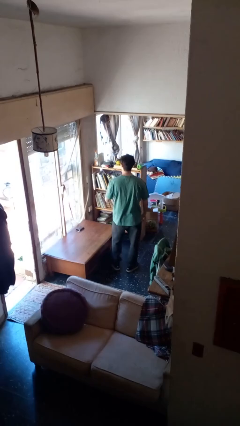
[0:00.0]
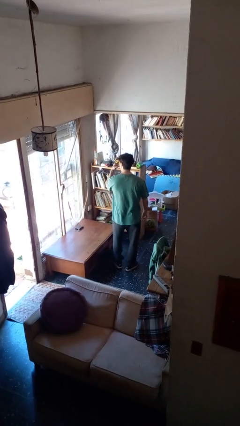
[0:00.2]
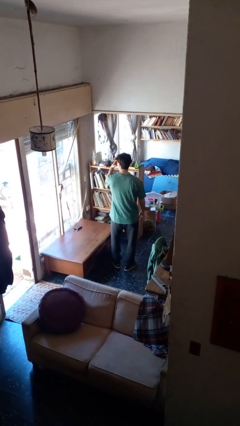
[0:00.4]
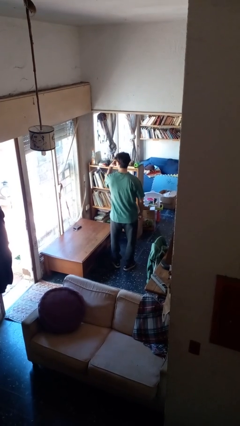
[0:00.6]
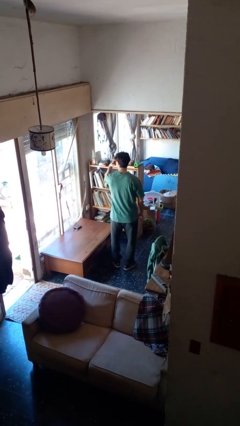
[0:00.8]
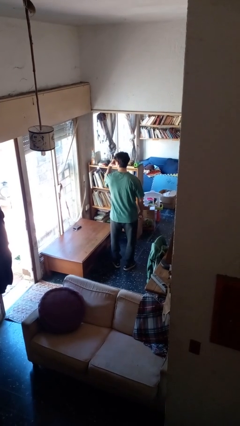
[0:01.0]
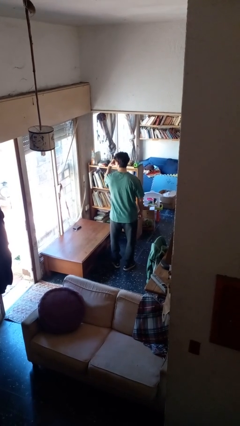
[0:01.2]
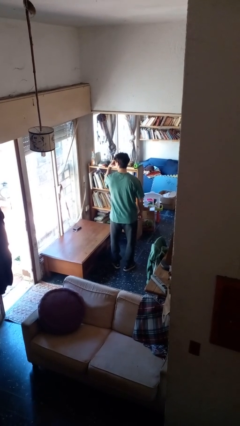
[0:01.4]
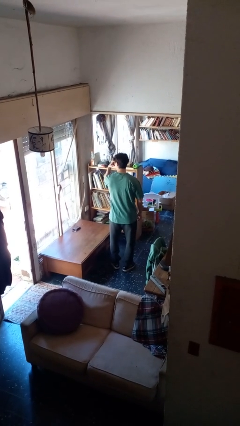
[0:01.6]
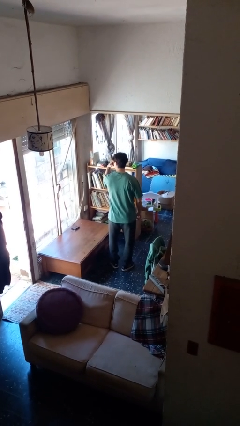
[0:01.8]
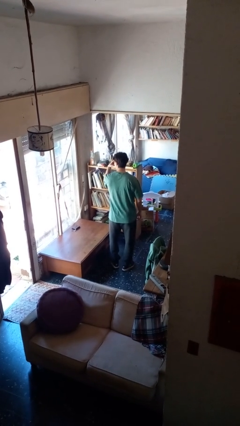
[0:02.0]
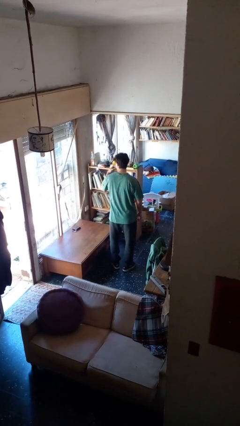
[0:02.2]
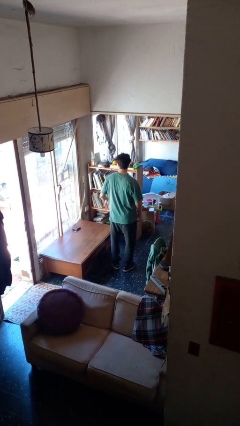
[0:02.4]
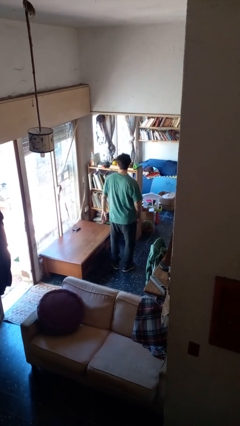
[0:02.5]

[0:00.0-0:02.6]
person gestures watch closely

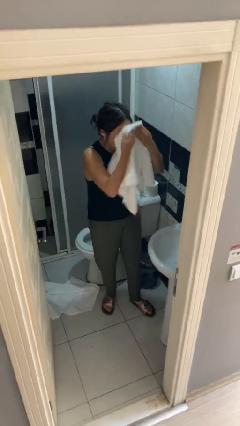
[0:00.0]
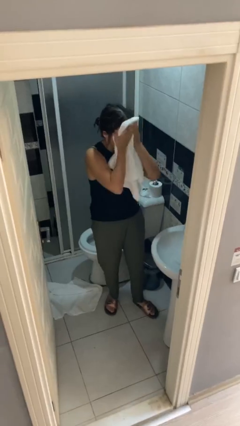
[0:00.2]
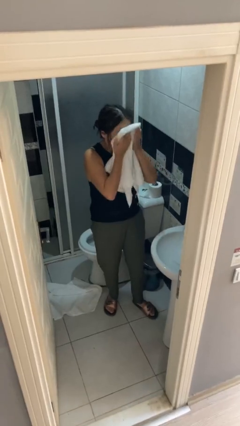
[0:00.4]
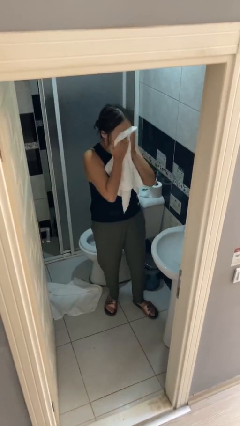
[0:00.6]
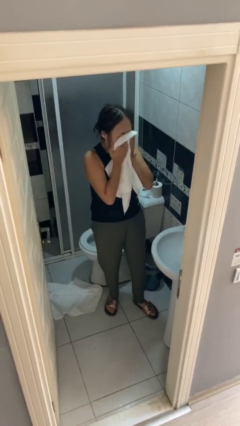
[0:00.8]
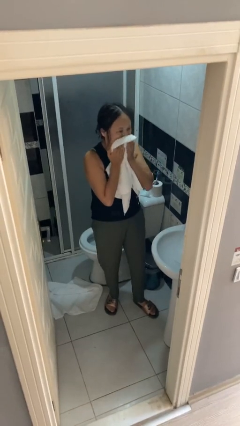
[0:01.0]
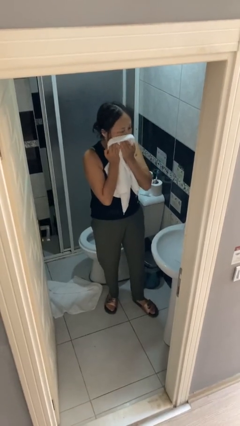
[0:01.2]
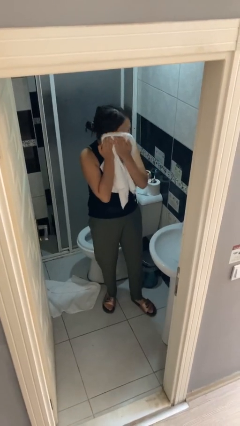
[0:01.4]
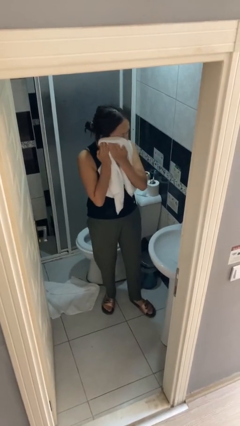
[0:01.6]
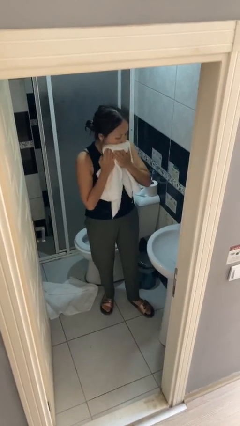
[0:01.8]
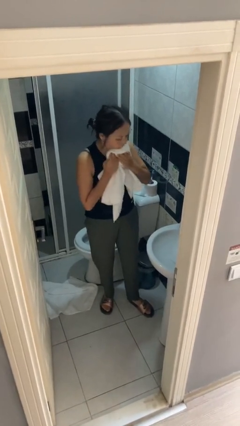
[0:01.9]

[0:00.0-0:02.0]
person dries face with towel

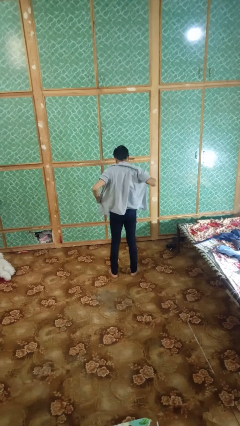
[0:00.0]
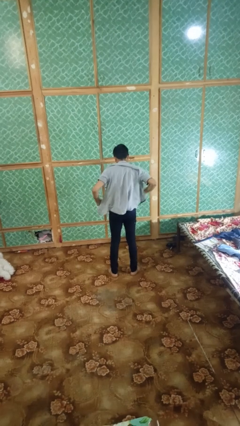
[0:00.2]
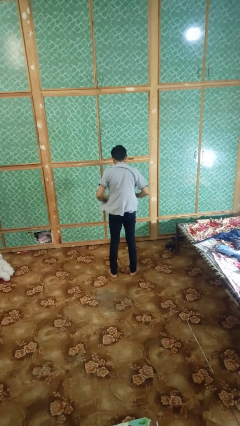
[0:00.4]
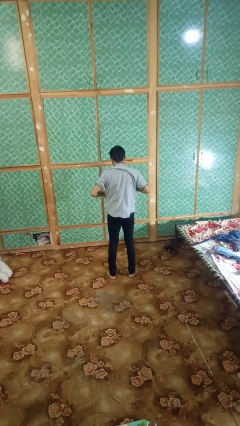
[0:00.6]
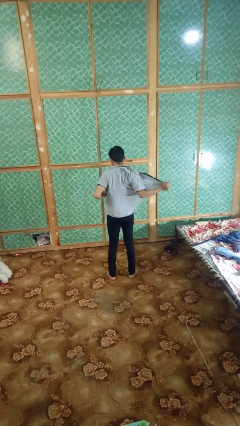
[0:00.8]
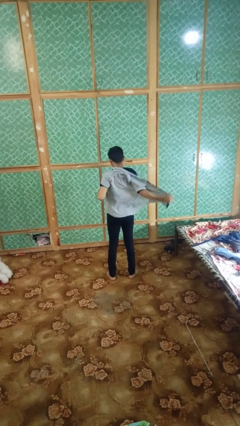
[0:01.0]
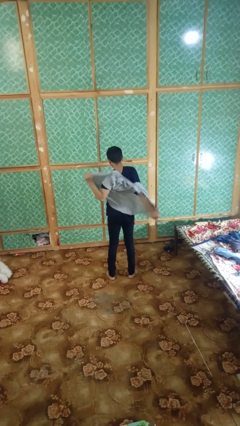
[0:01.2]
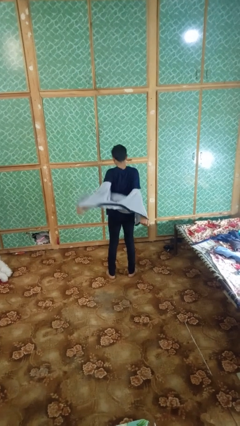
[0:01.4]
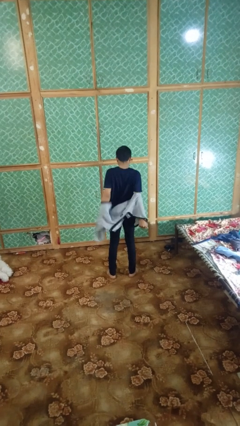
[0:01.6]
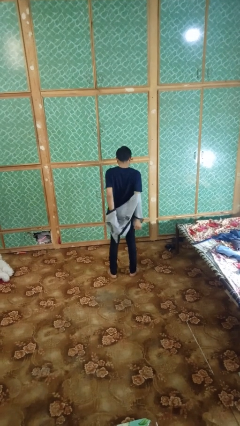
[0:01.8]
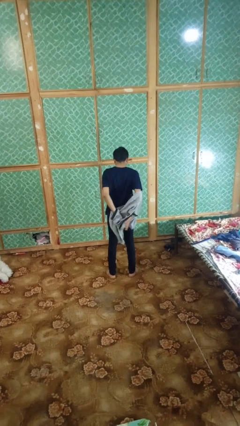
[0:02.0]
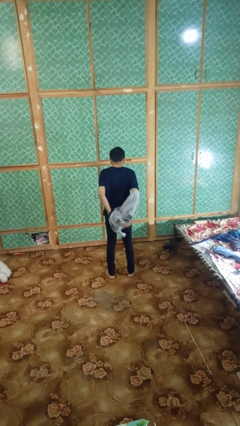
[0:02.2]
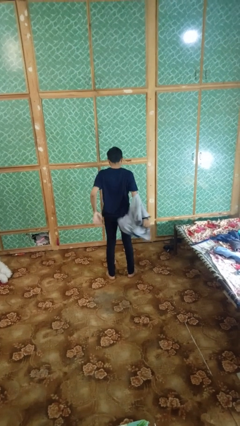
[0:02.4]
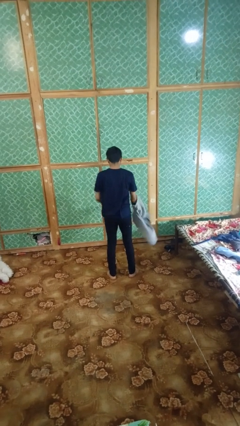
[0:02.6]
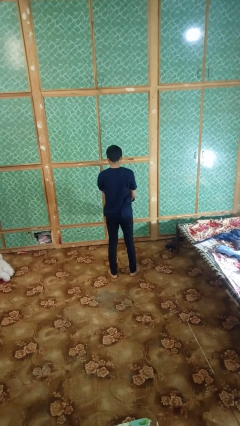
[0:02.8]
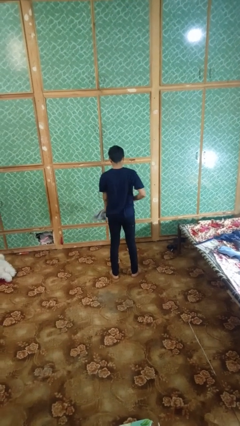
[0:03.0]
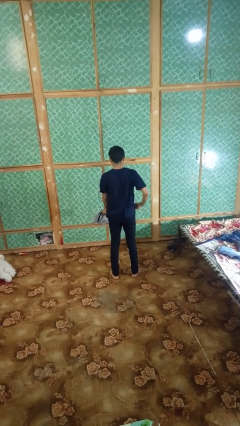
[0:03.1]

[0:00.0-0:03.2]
person takes off shirt

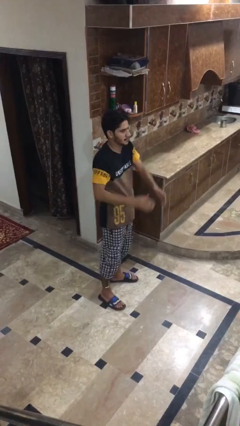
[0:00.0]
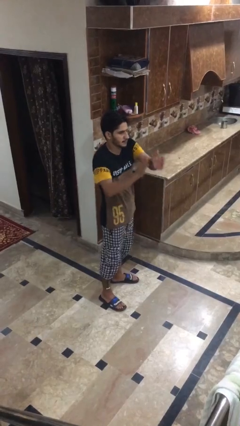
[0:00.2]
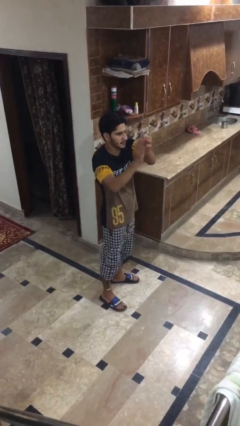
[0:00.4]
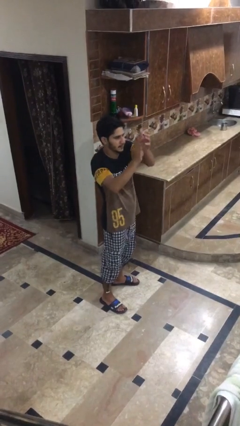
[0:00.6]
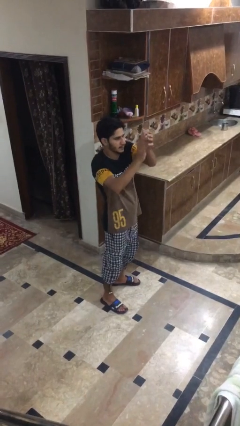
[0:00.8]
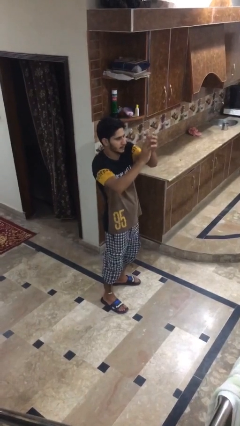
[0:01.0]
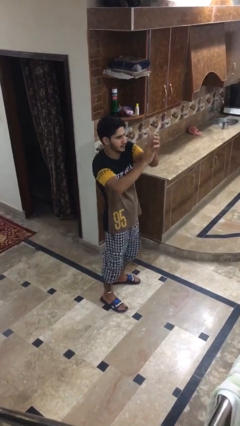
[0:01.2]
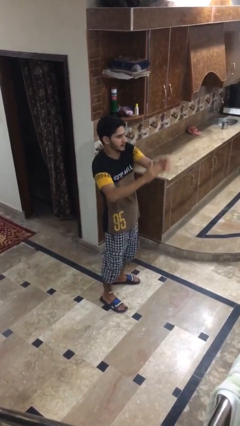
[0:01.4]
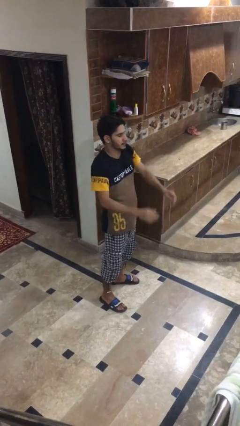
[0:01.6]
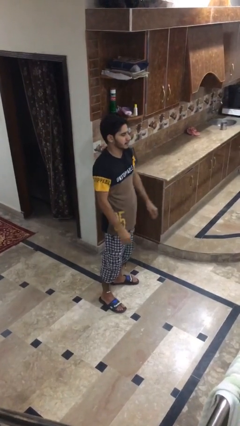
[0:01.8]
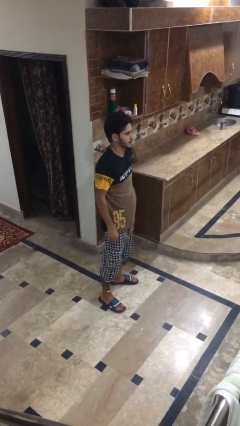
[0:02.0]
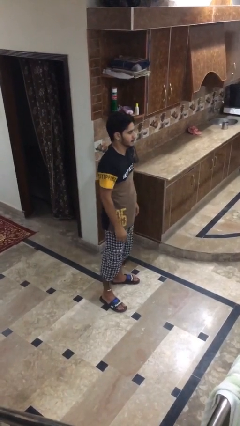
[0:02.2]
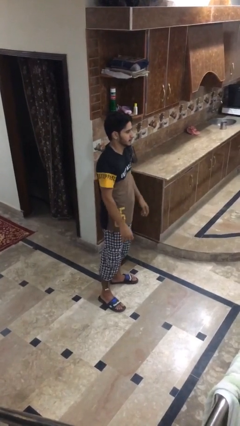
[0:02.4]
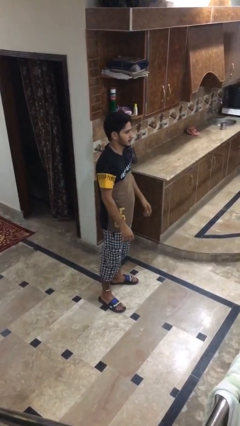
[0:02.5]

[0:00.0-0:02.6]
person claps hands

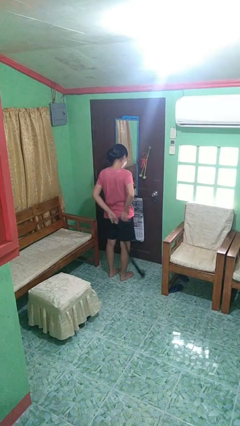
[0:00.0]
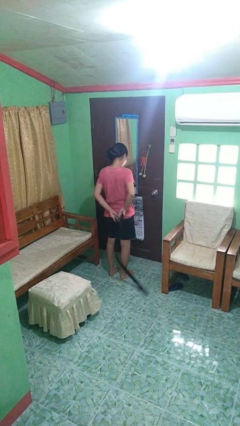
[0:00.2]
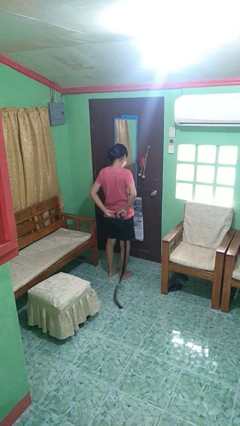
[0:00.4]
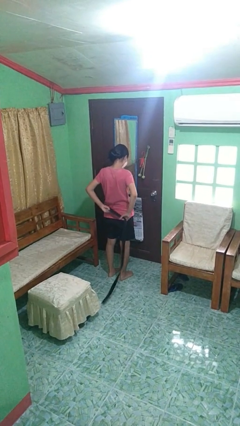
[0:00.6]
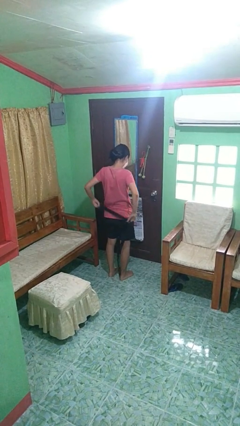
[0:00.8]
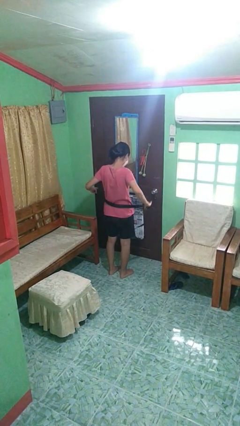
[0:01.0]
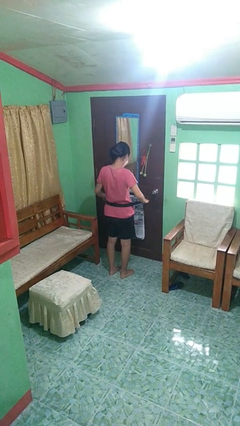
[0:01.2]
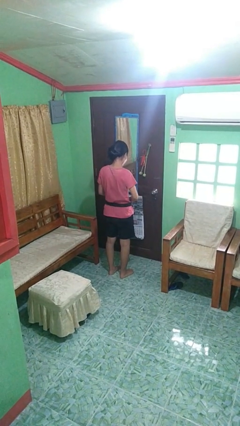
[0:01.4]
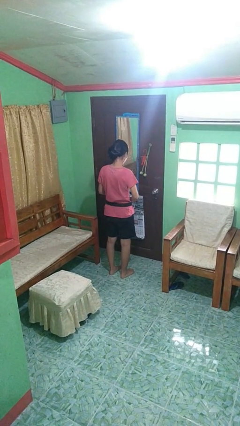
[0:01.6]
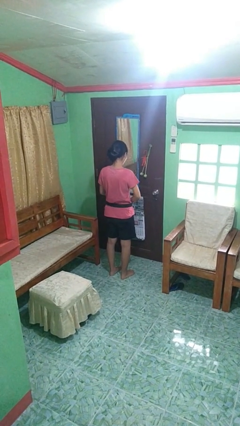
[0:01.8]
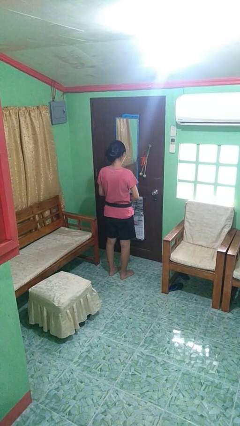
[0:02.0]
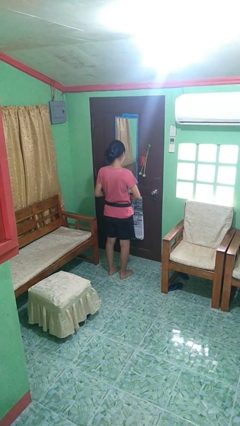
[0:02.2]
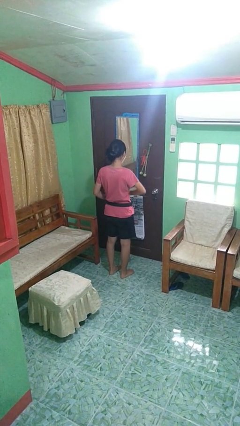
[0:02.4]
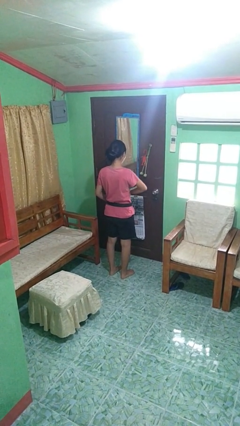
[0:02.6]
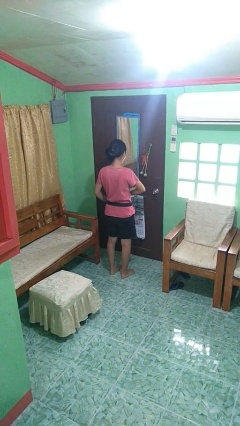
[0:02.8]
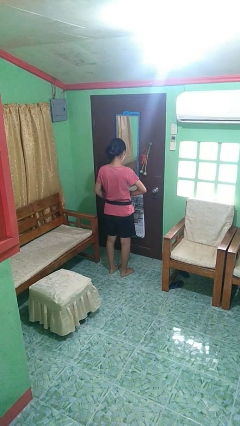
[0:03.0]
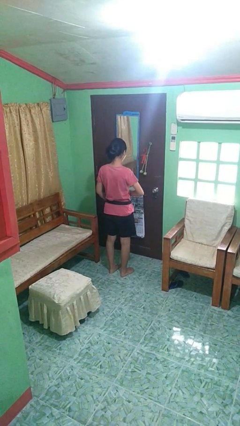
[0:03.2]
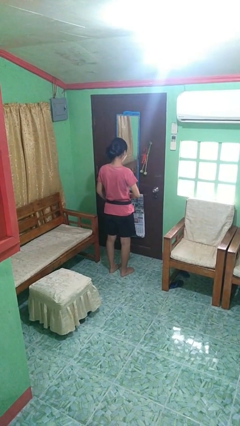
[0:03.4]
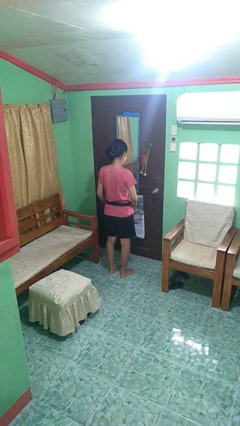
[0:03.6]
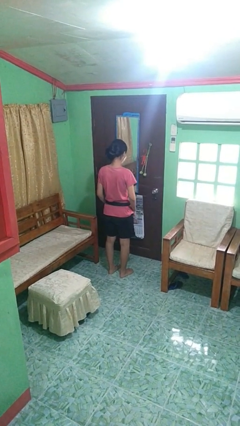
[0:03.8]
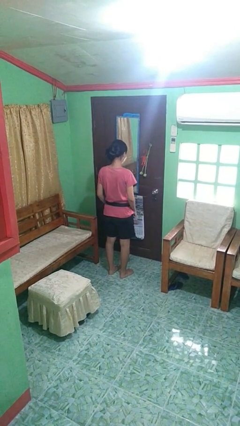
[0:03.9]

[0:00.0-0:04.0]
person puts on belt

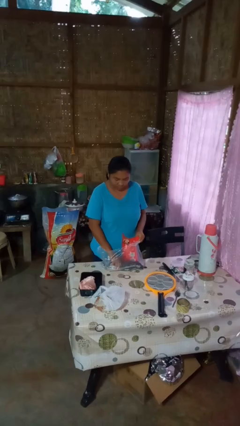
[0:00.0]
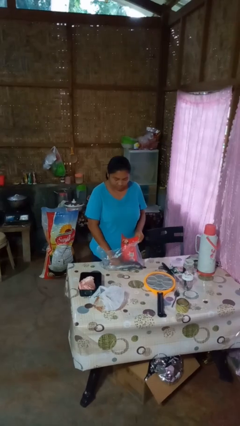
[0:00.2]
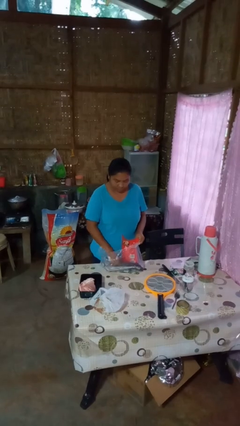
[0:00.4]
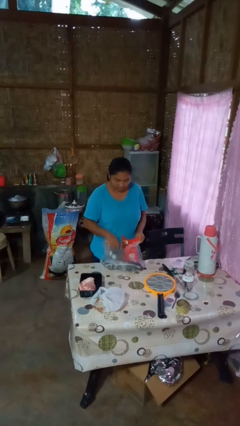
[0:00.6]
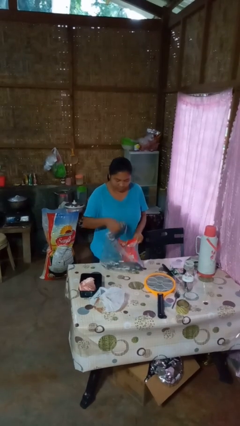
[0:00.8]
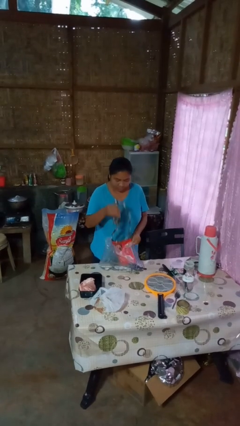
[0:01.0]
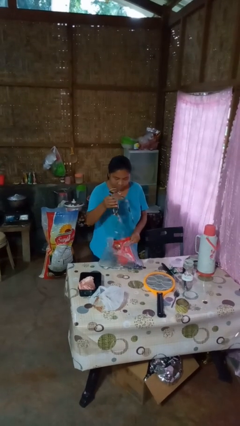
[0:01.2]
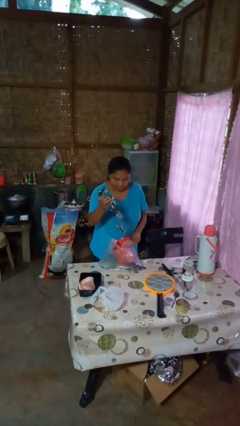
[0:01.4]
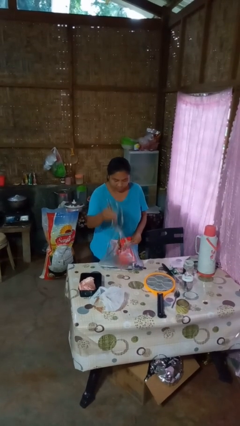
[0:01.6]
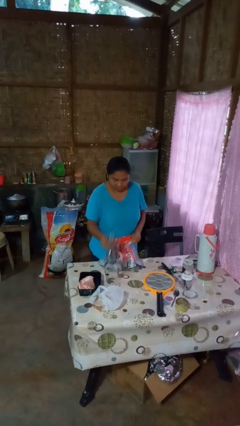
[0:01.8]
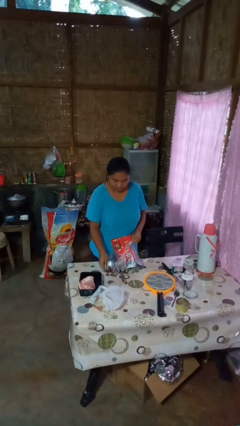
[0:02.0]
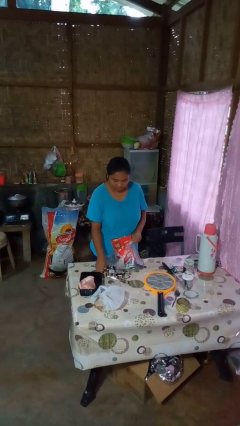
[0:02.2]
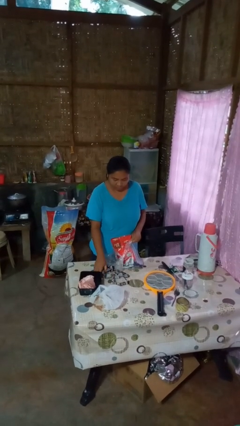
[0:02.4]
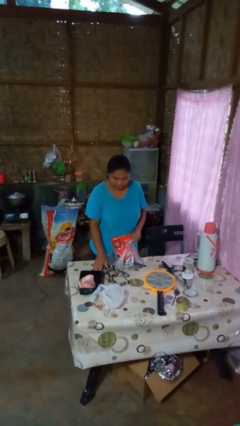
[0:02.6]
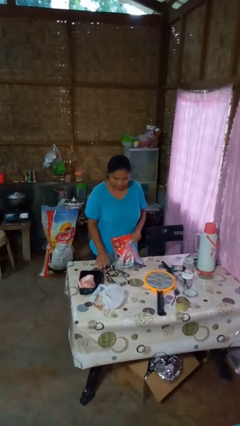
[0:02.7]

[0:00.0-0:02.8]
person takes object from bag

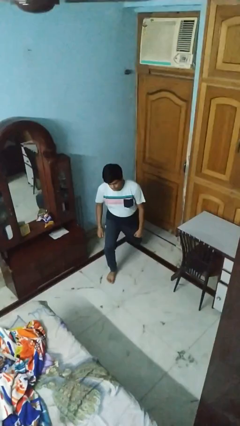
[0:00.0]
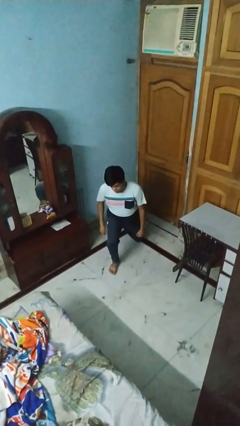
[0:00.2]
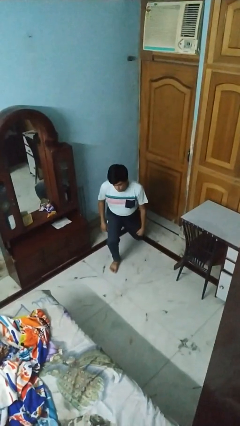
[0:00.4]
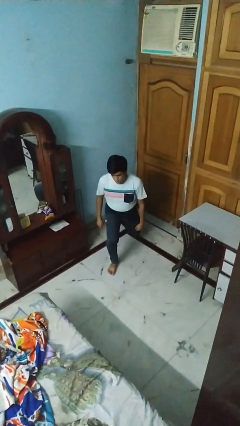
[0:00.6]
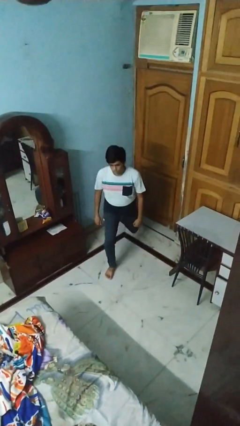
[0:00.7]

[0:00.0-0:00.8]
person exercises with lunges
